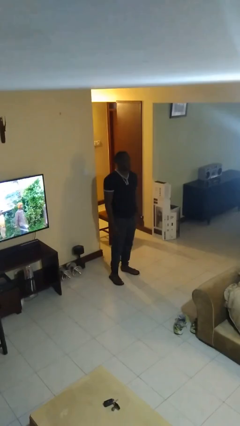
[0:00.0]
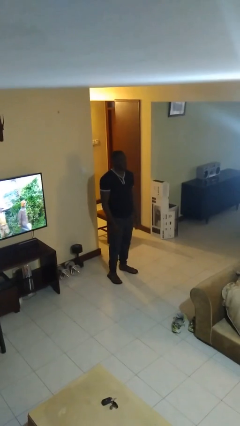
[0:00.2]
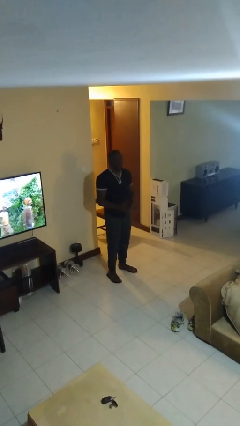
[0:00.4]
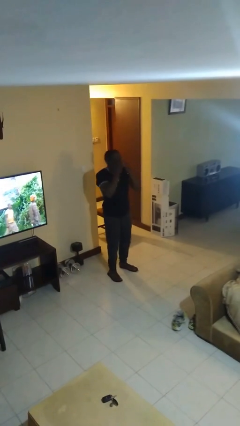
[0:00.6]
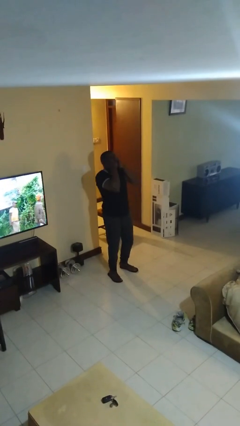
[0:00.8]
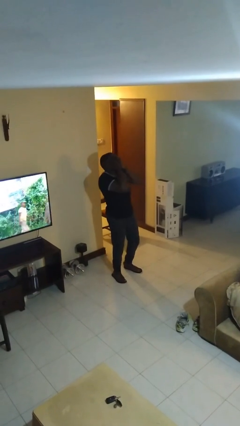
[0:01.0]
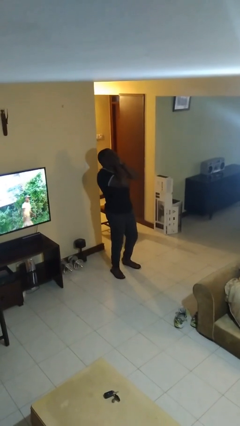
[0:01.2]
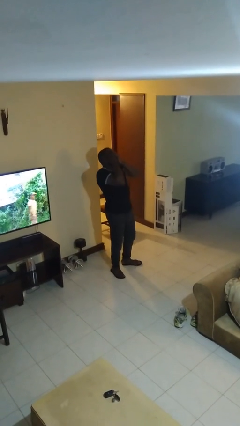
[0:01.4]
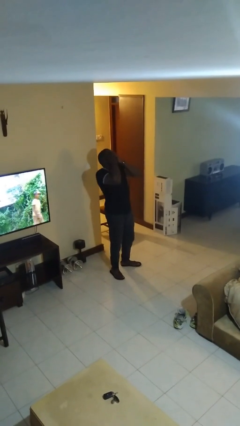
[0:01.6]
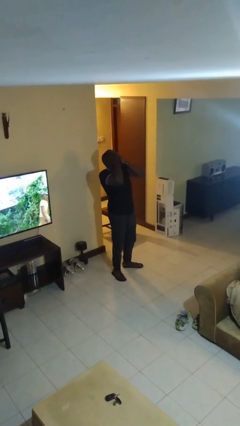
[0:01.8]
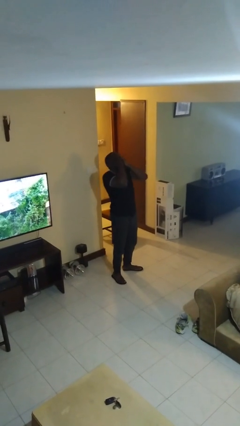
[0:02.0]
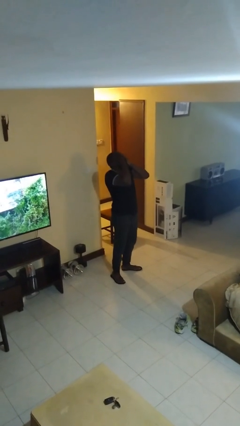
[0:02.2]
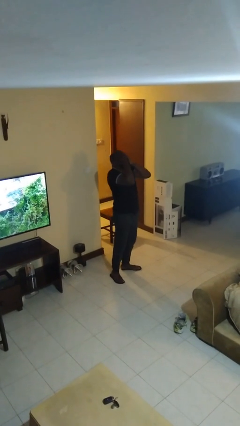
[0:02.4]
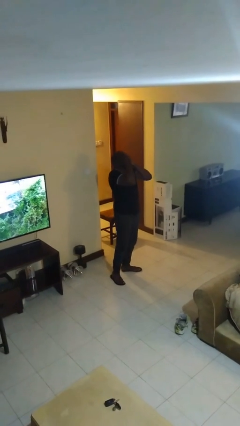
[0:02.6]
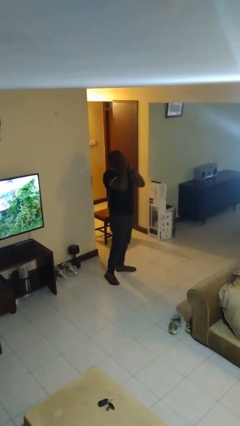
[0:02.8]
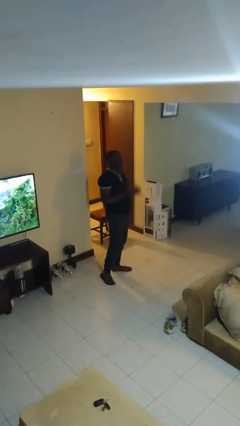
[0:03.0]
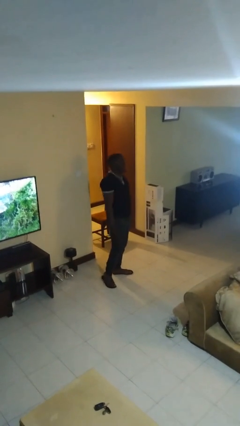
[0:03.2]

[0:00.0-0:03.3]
person covers face with hands

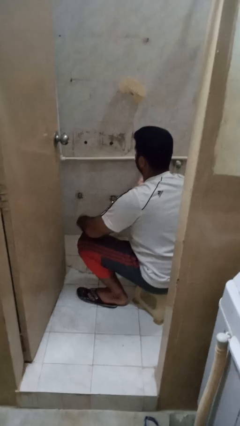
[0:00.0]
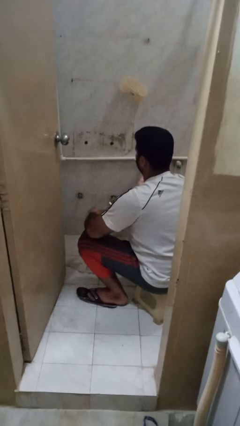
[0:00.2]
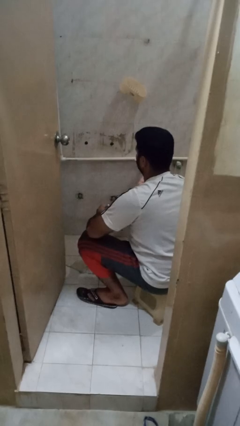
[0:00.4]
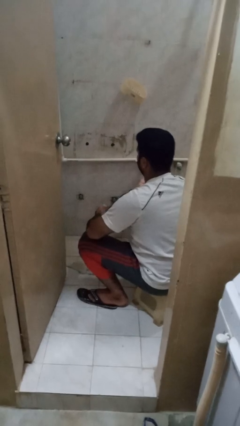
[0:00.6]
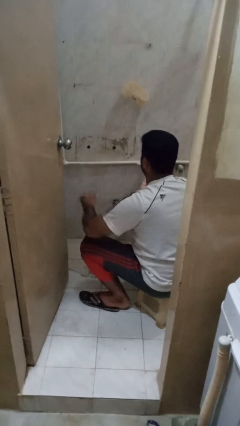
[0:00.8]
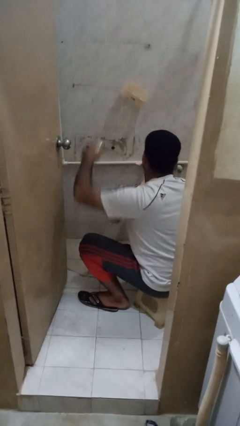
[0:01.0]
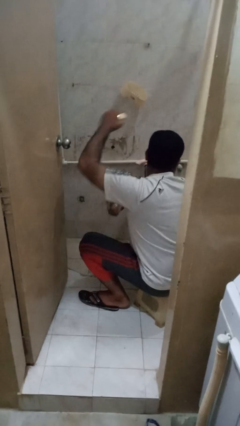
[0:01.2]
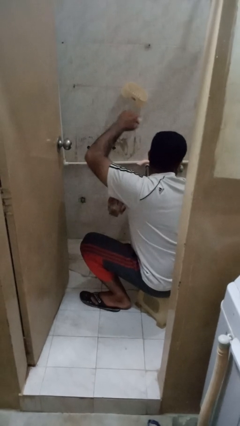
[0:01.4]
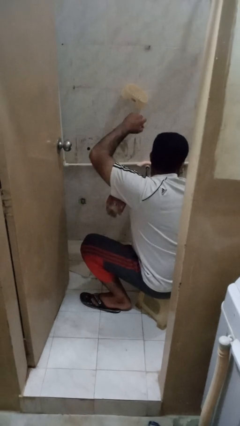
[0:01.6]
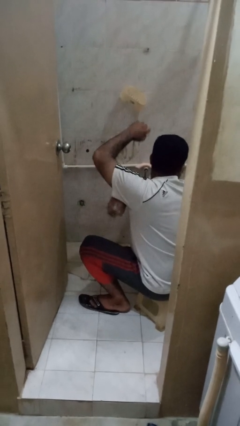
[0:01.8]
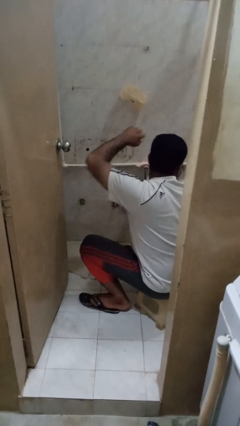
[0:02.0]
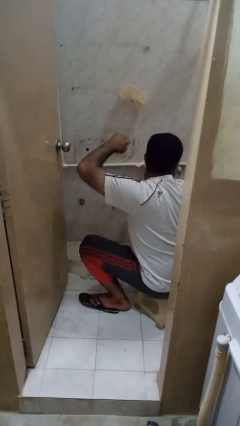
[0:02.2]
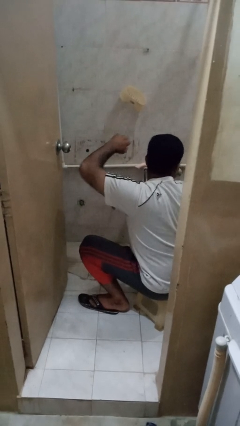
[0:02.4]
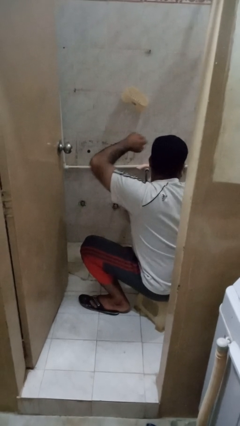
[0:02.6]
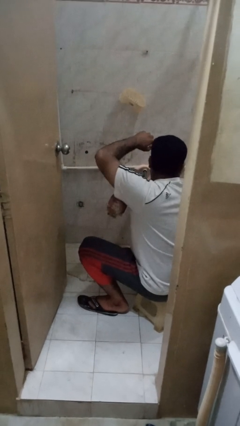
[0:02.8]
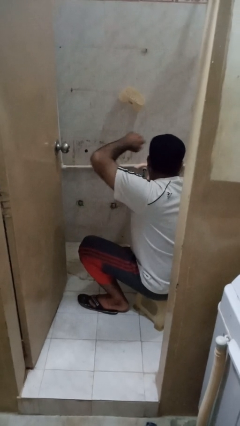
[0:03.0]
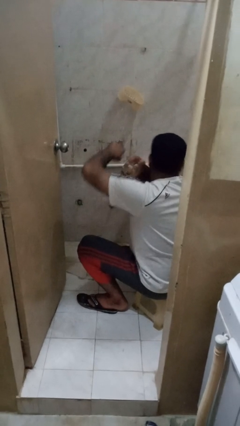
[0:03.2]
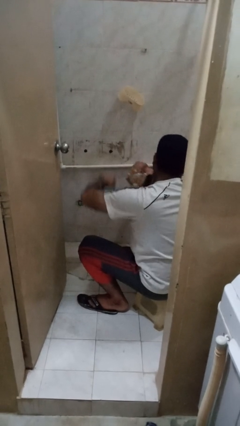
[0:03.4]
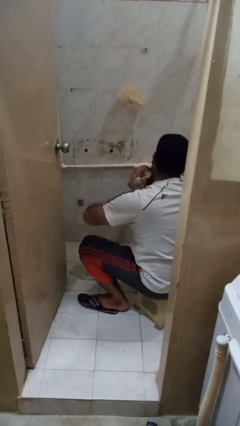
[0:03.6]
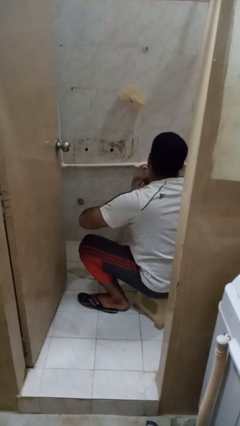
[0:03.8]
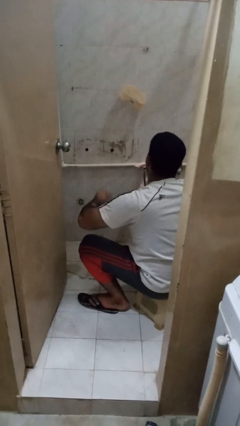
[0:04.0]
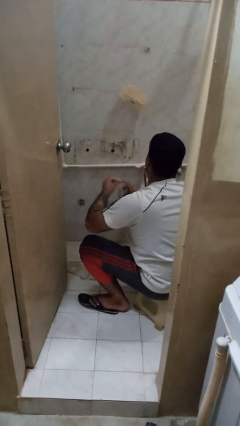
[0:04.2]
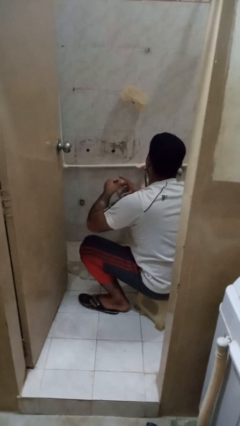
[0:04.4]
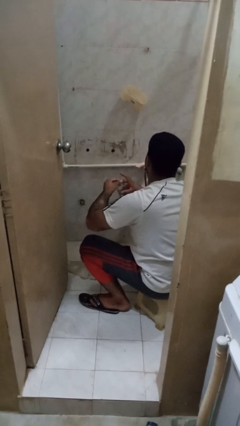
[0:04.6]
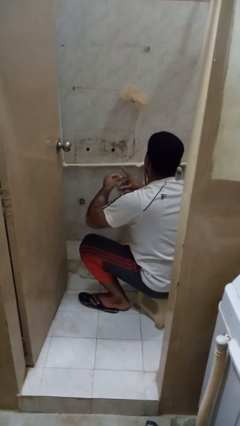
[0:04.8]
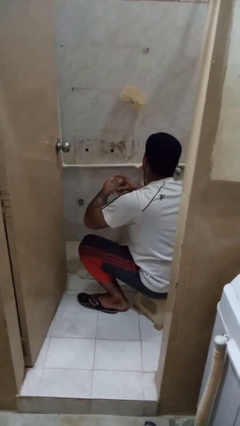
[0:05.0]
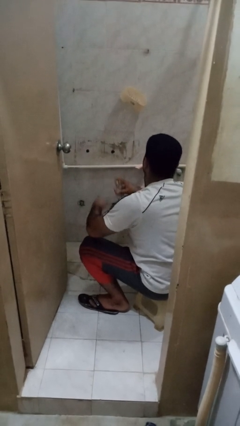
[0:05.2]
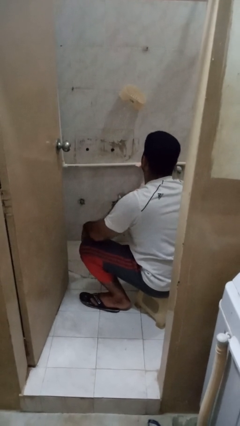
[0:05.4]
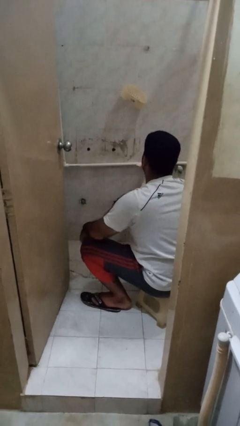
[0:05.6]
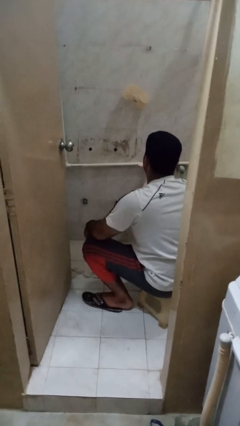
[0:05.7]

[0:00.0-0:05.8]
person applies deodorant

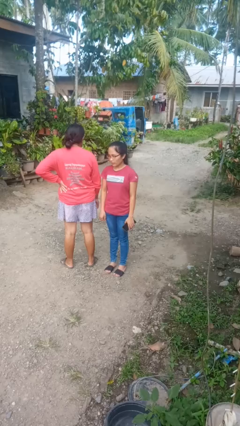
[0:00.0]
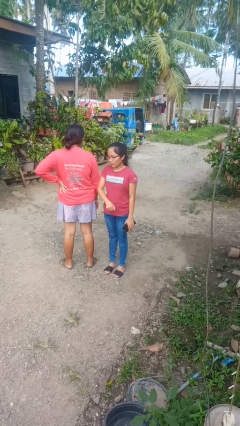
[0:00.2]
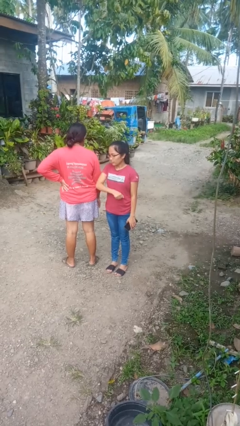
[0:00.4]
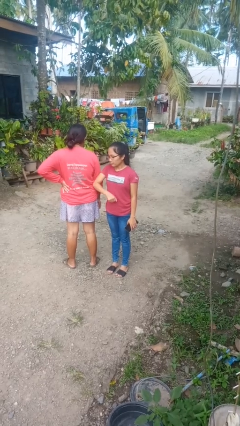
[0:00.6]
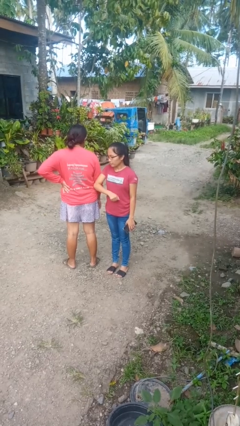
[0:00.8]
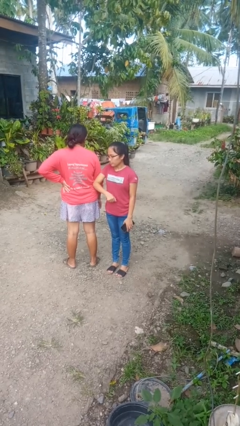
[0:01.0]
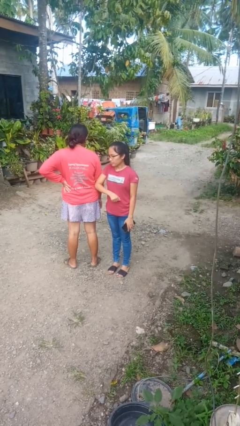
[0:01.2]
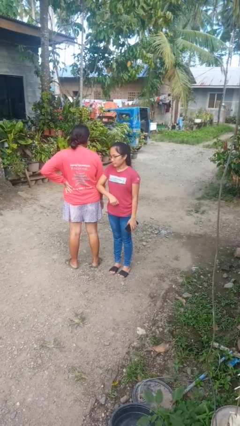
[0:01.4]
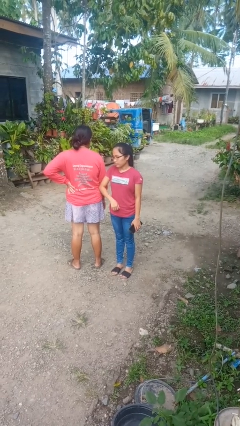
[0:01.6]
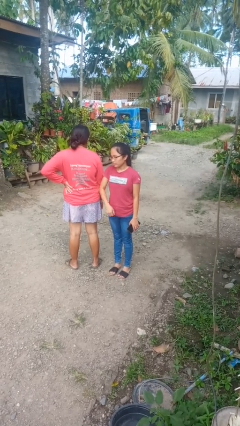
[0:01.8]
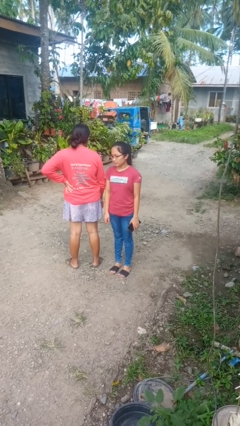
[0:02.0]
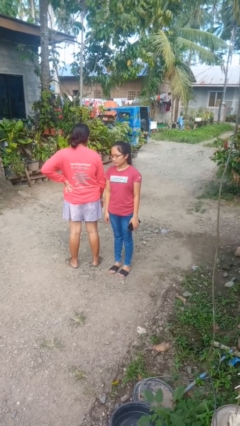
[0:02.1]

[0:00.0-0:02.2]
person nudges person with elbow

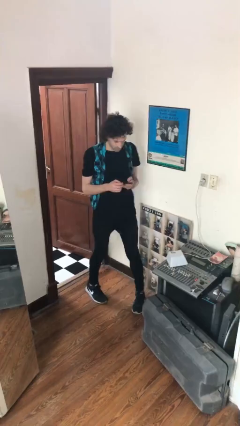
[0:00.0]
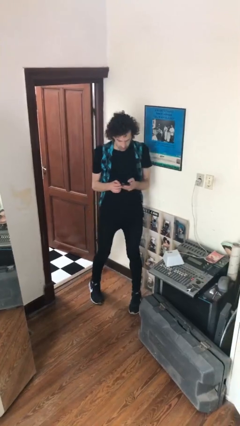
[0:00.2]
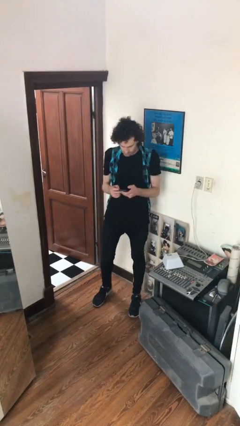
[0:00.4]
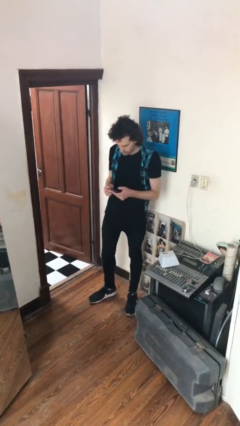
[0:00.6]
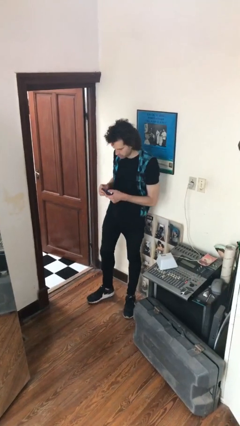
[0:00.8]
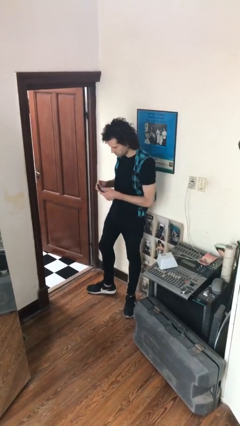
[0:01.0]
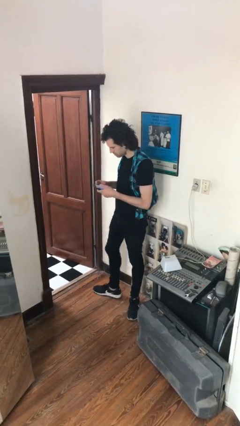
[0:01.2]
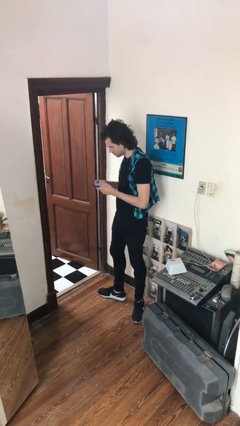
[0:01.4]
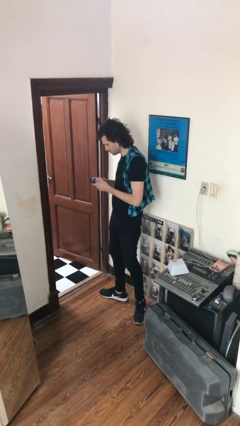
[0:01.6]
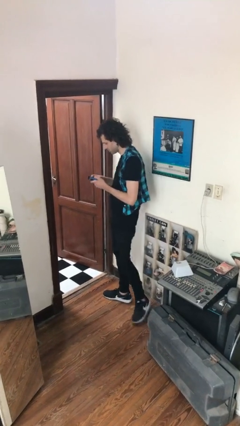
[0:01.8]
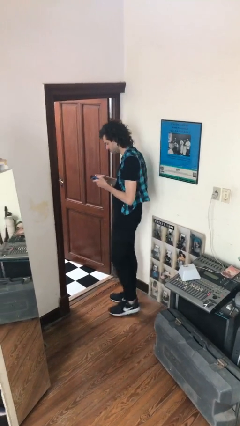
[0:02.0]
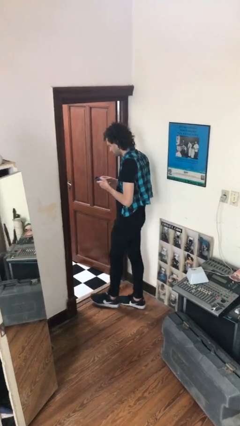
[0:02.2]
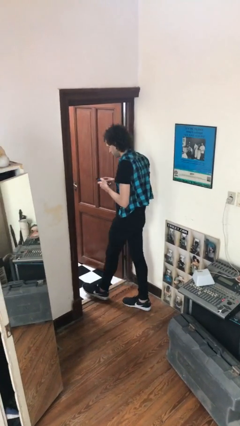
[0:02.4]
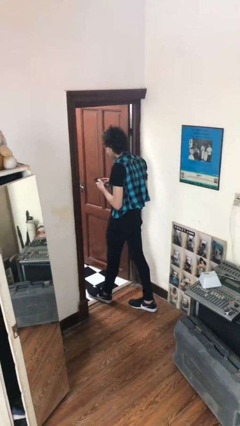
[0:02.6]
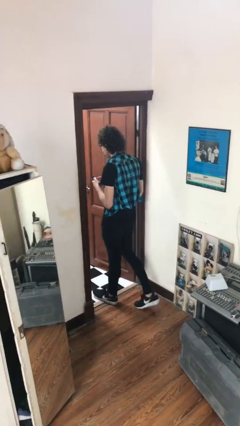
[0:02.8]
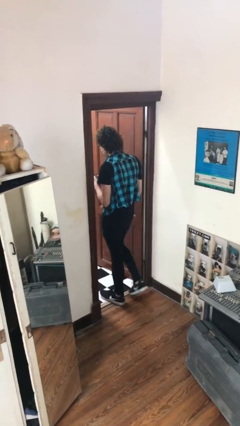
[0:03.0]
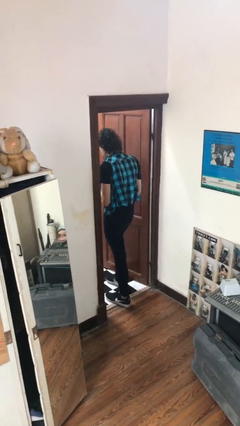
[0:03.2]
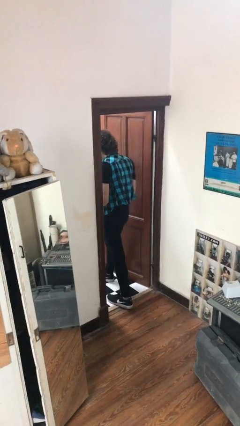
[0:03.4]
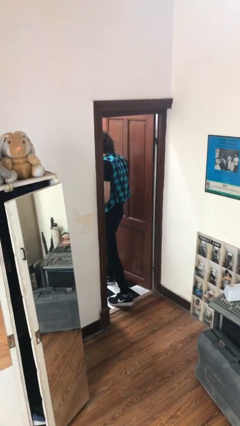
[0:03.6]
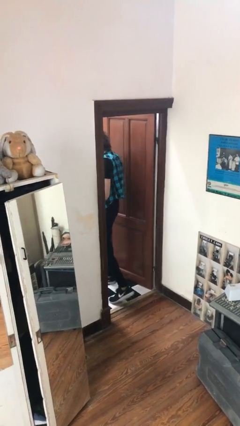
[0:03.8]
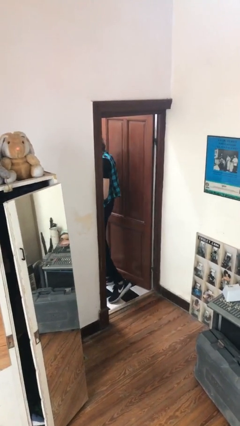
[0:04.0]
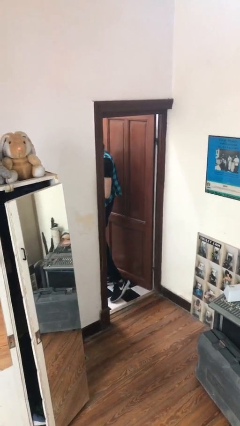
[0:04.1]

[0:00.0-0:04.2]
person exits scene through structure

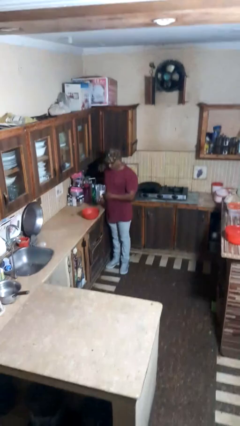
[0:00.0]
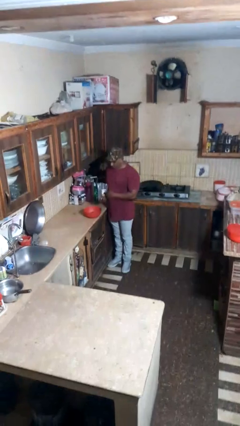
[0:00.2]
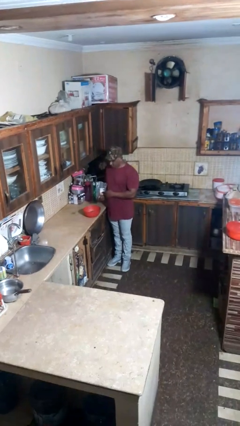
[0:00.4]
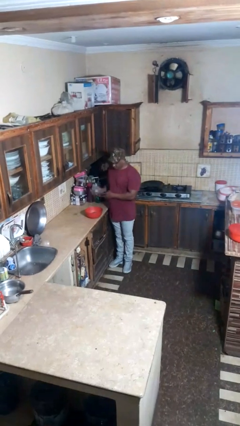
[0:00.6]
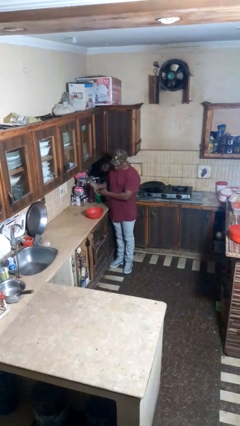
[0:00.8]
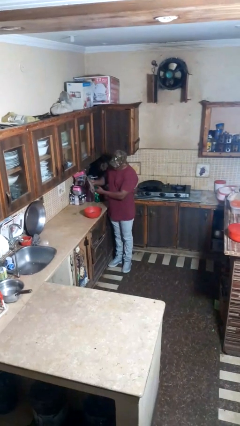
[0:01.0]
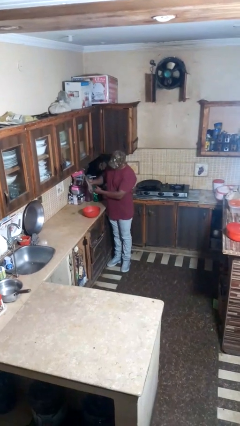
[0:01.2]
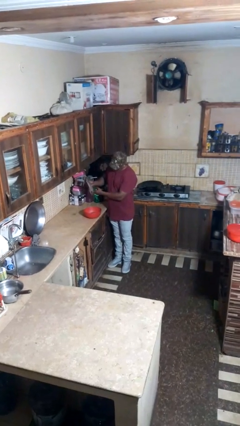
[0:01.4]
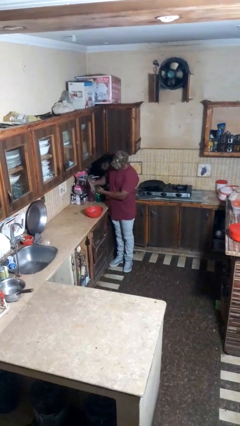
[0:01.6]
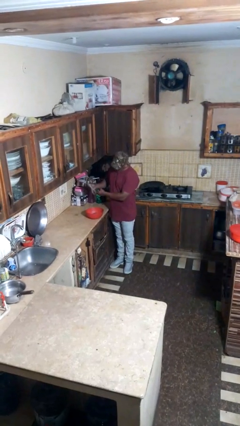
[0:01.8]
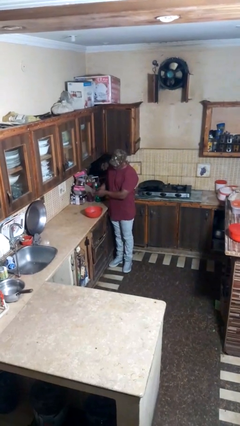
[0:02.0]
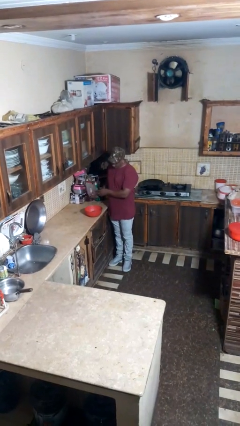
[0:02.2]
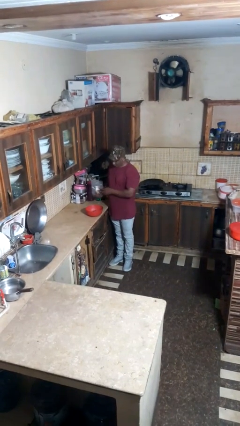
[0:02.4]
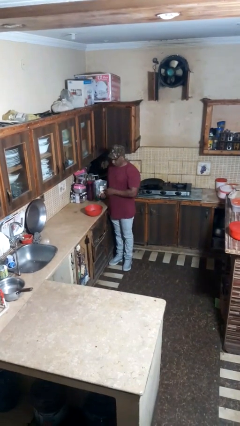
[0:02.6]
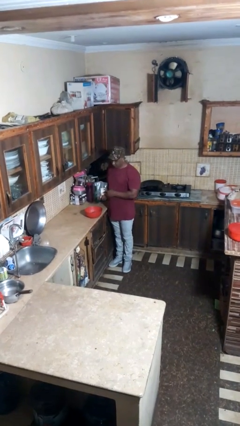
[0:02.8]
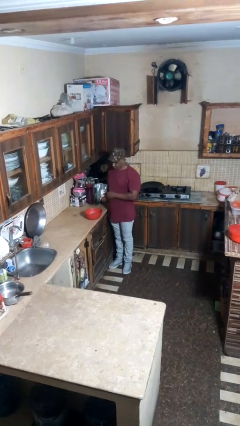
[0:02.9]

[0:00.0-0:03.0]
person pours into bowl
